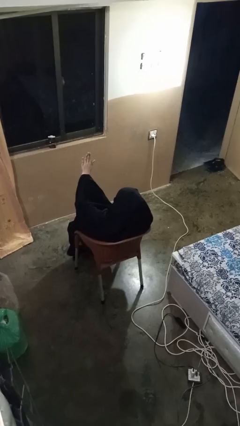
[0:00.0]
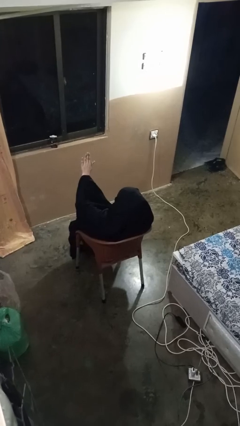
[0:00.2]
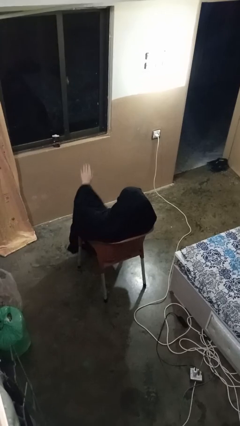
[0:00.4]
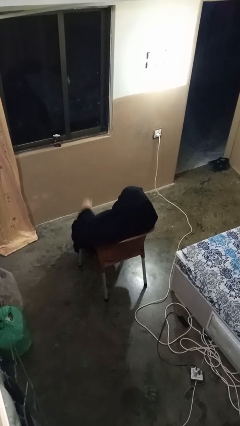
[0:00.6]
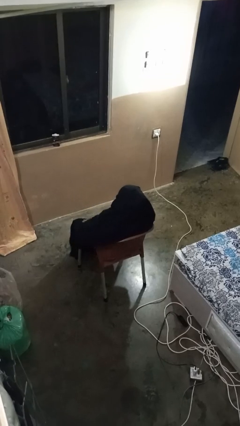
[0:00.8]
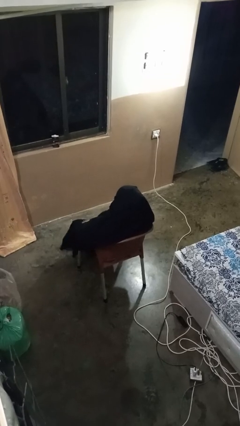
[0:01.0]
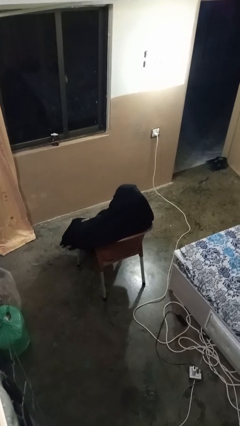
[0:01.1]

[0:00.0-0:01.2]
person gestures lower hand

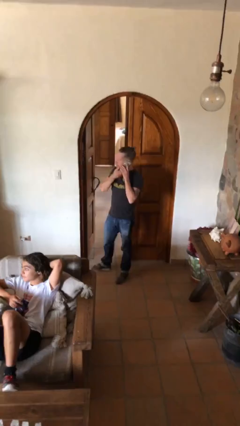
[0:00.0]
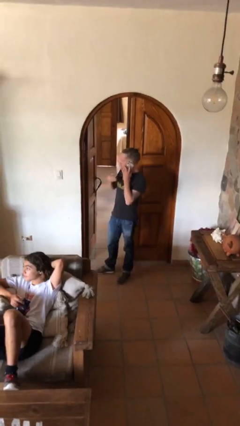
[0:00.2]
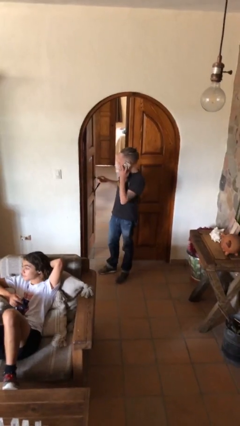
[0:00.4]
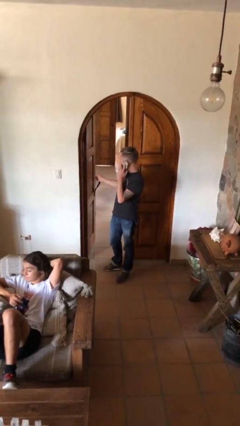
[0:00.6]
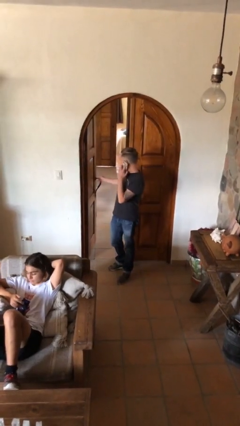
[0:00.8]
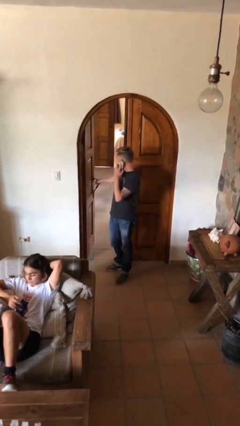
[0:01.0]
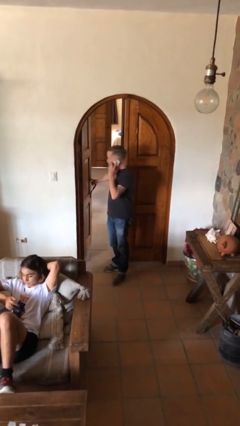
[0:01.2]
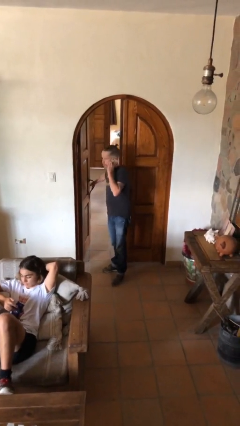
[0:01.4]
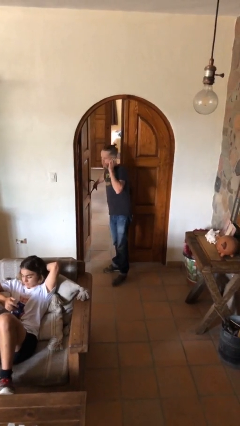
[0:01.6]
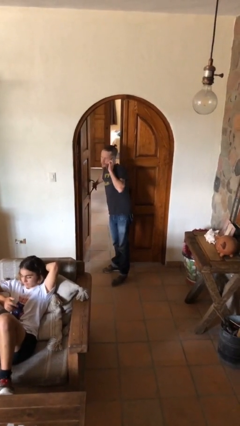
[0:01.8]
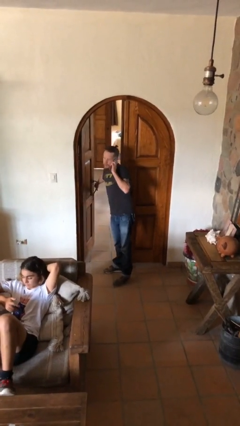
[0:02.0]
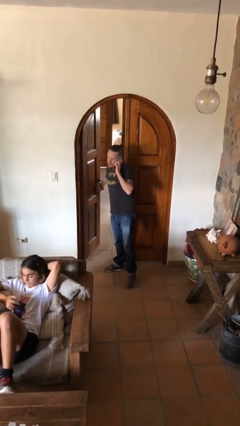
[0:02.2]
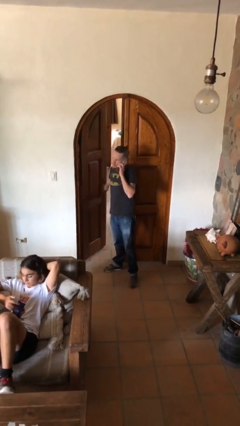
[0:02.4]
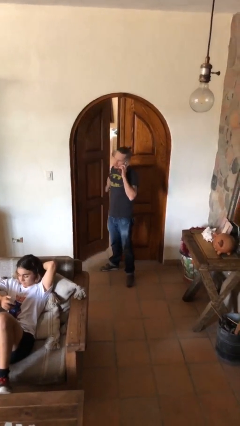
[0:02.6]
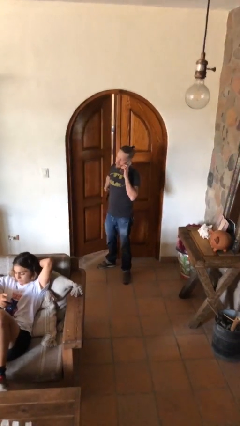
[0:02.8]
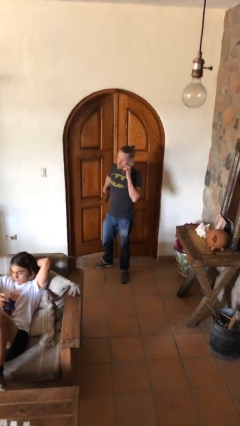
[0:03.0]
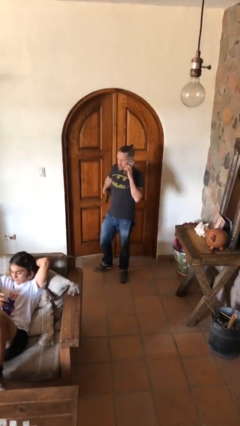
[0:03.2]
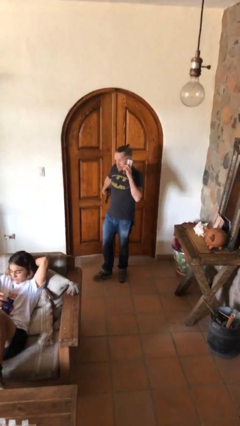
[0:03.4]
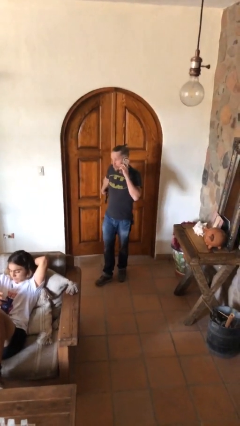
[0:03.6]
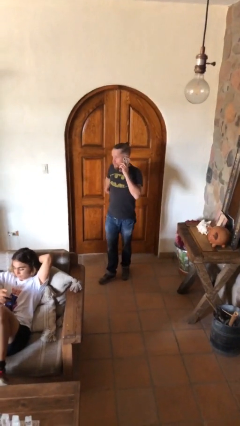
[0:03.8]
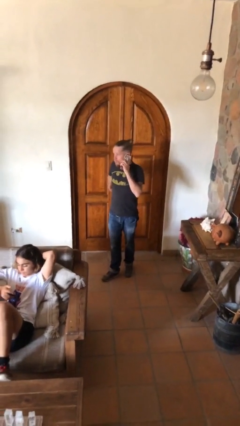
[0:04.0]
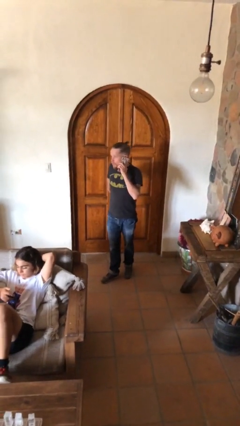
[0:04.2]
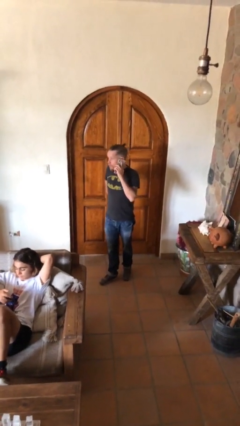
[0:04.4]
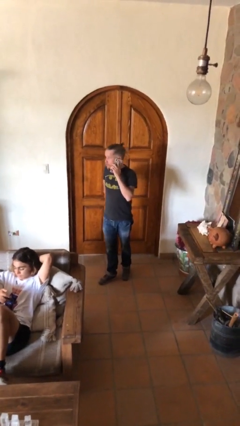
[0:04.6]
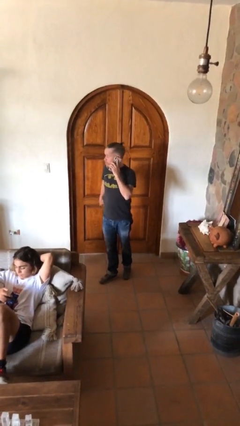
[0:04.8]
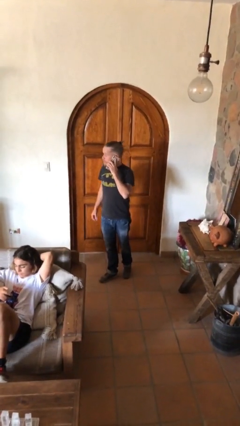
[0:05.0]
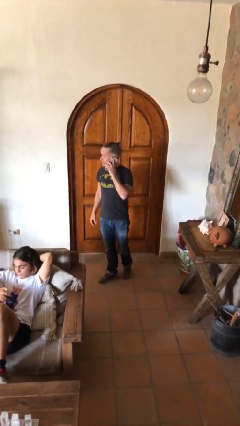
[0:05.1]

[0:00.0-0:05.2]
person closes facility door

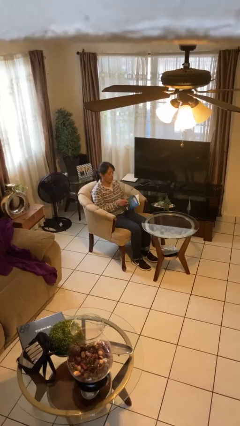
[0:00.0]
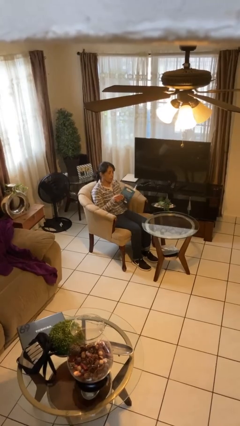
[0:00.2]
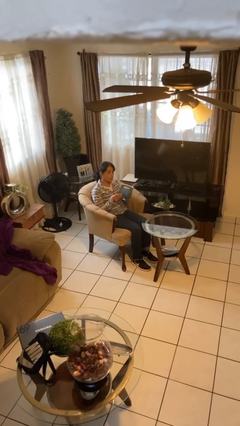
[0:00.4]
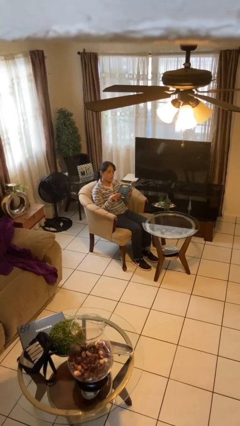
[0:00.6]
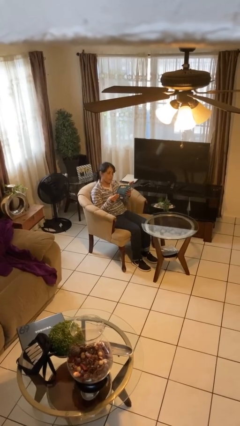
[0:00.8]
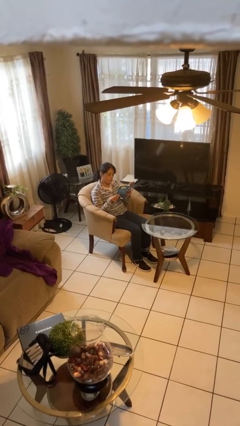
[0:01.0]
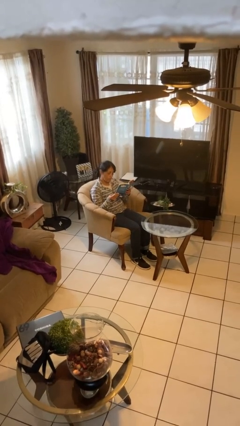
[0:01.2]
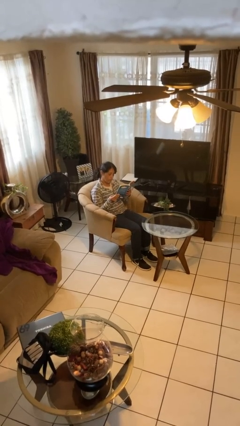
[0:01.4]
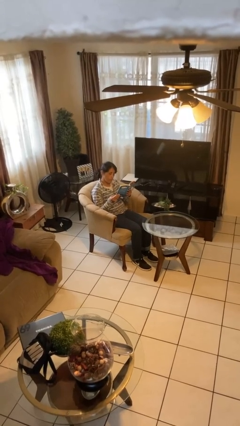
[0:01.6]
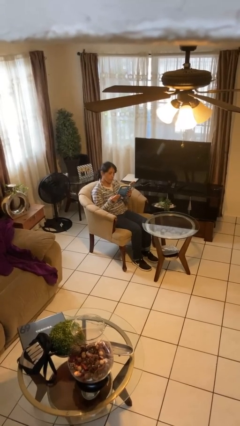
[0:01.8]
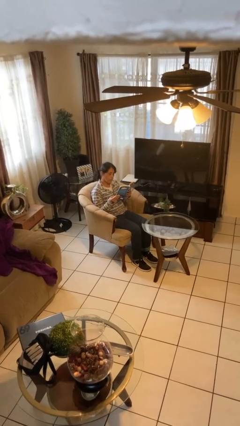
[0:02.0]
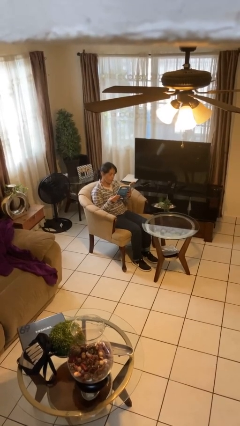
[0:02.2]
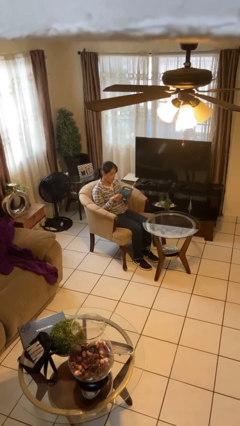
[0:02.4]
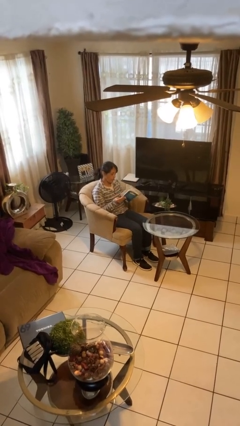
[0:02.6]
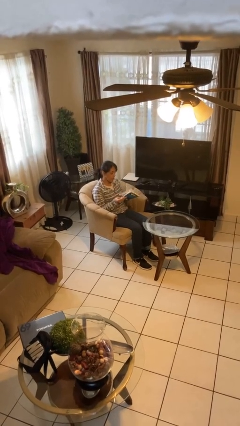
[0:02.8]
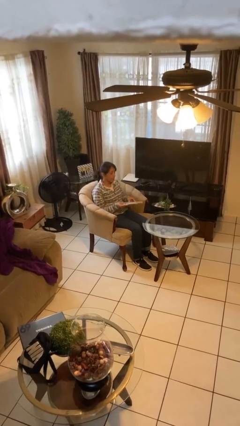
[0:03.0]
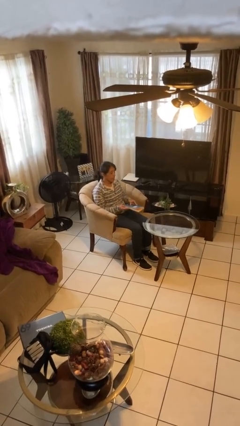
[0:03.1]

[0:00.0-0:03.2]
person reads document

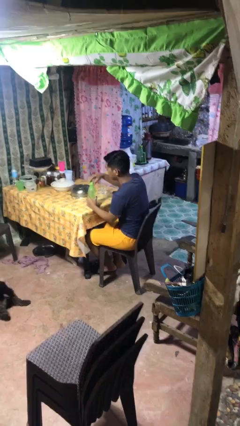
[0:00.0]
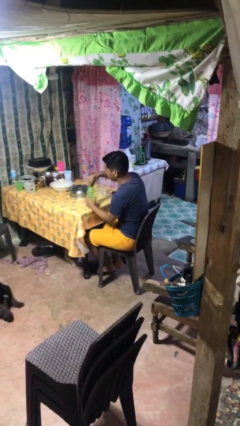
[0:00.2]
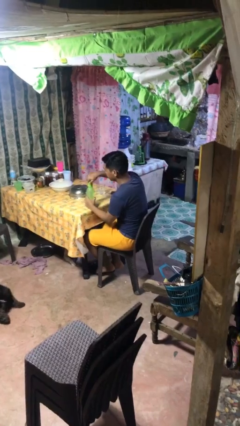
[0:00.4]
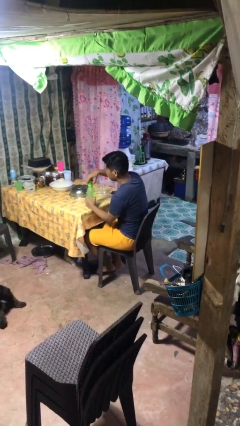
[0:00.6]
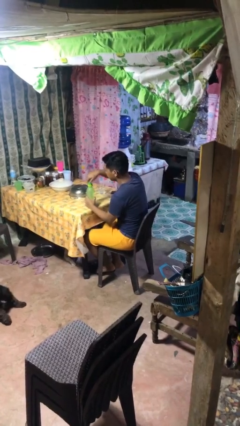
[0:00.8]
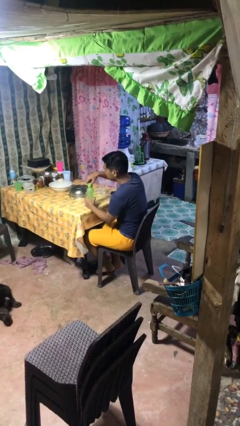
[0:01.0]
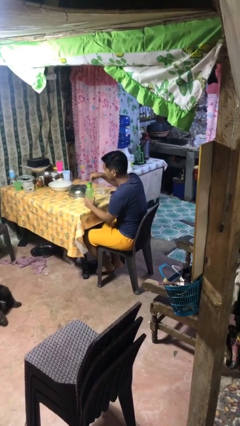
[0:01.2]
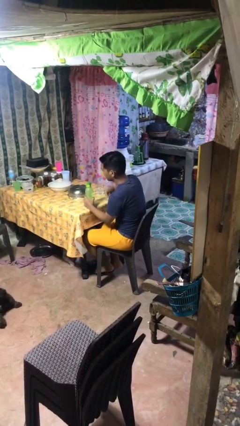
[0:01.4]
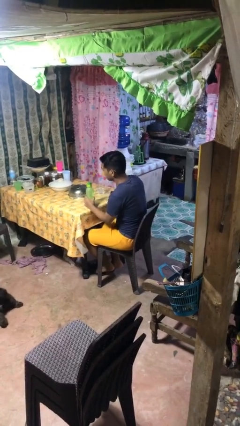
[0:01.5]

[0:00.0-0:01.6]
person screws lid to bottle

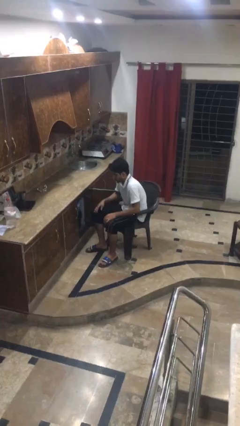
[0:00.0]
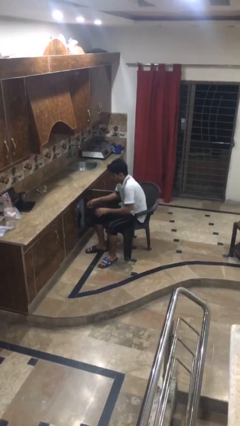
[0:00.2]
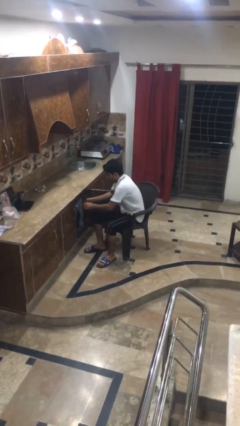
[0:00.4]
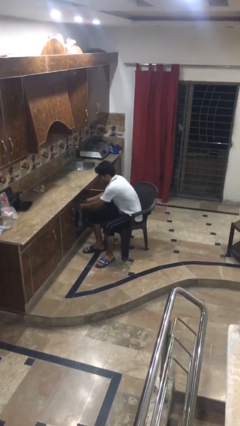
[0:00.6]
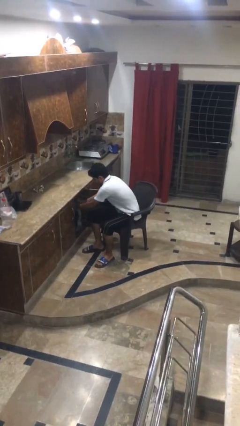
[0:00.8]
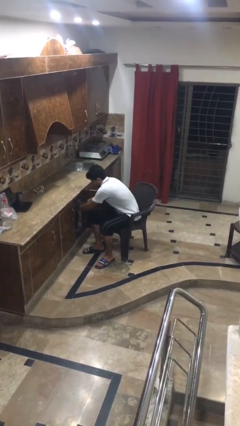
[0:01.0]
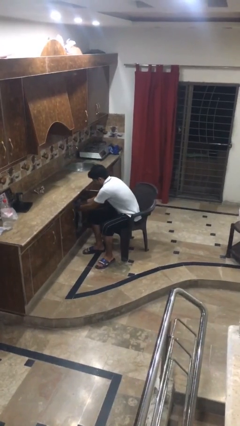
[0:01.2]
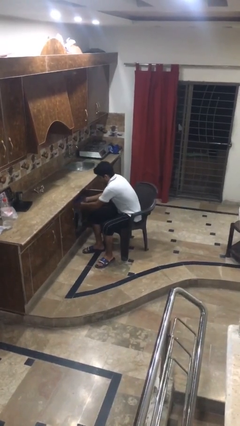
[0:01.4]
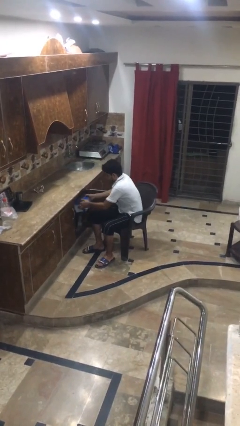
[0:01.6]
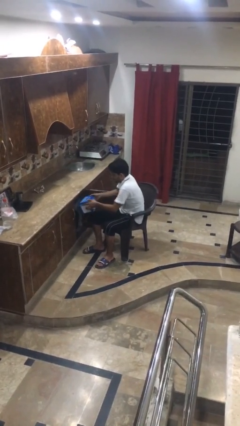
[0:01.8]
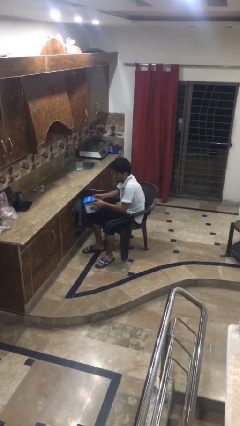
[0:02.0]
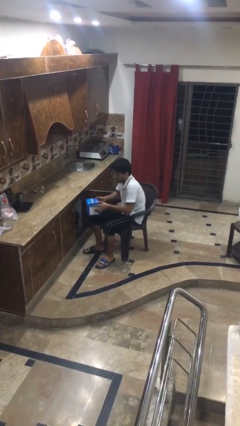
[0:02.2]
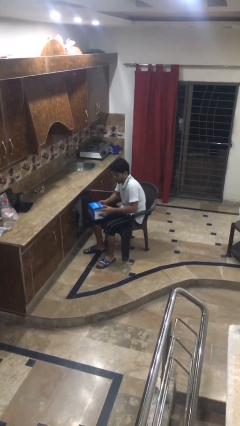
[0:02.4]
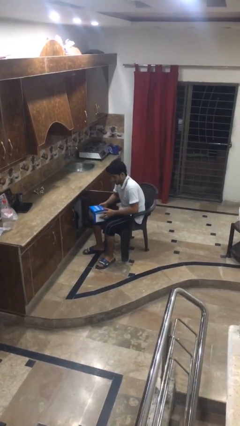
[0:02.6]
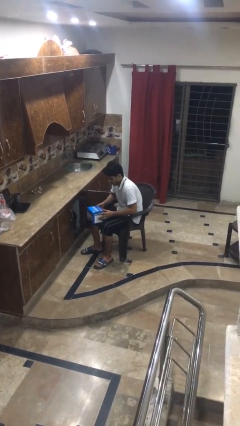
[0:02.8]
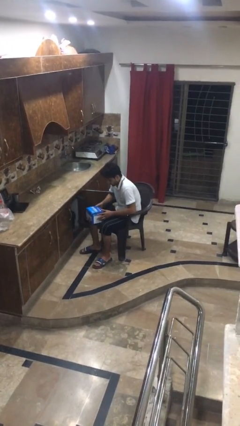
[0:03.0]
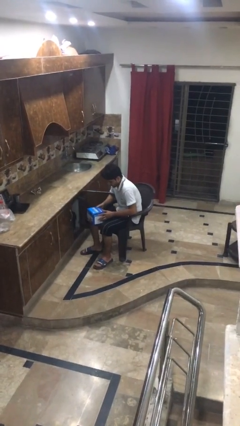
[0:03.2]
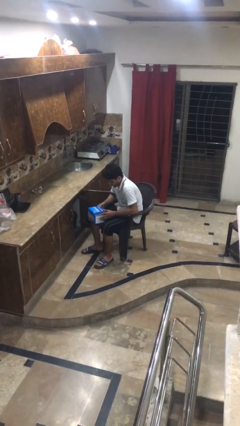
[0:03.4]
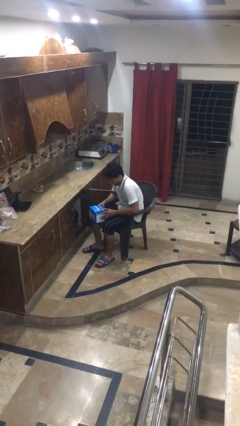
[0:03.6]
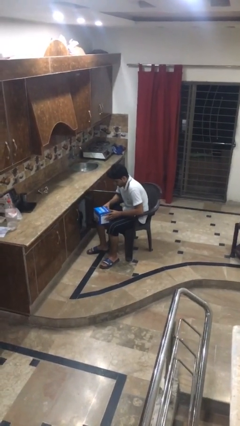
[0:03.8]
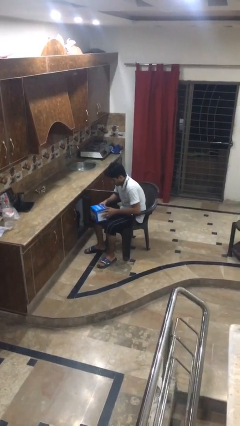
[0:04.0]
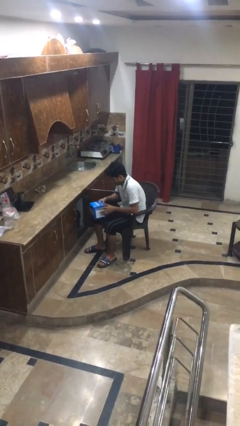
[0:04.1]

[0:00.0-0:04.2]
person picks up object from cabinet

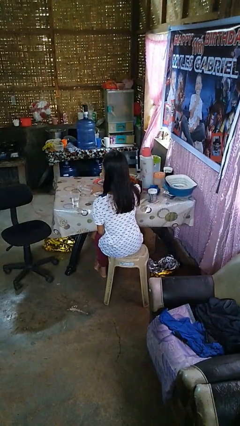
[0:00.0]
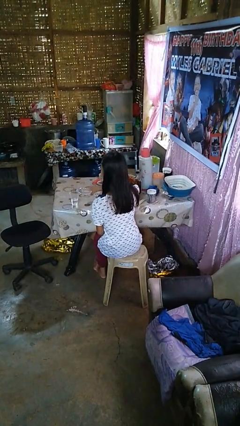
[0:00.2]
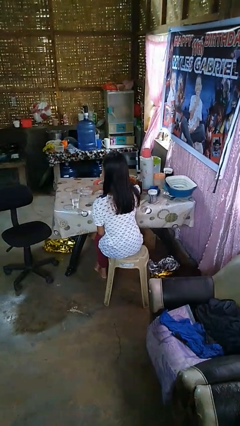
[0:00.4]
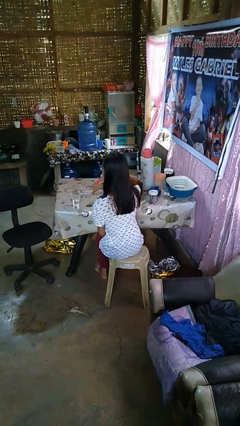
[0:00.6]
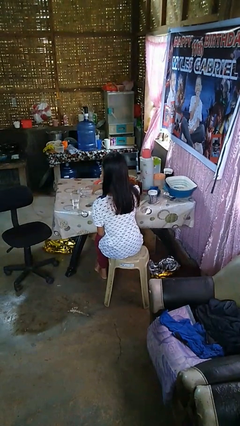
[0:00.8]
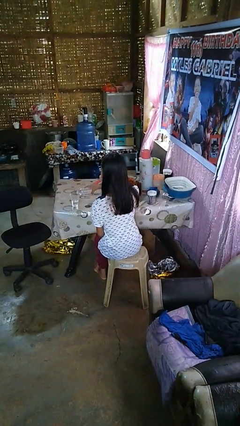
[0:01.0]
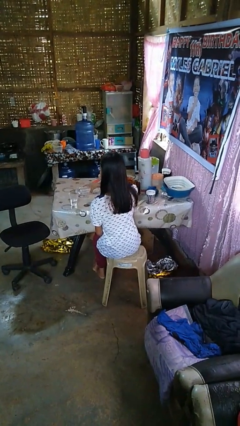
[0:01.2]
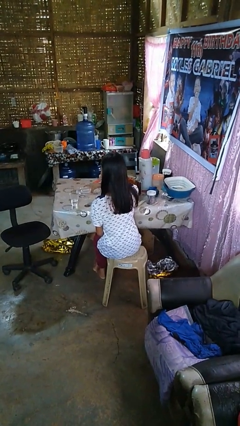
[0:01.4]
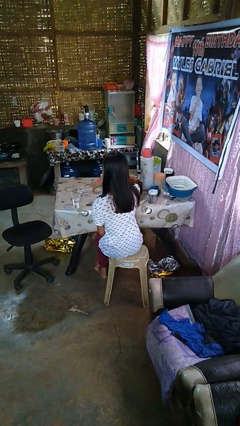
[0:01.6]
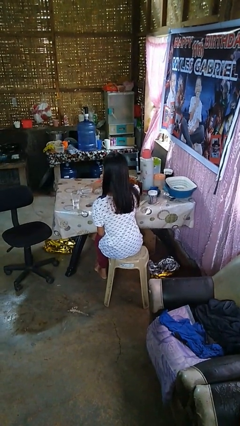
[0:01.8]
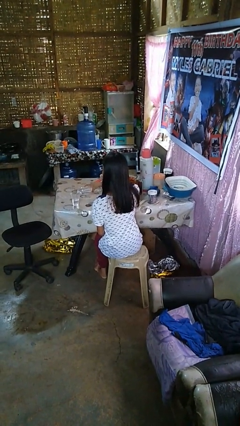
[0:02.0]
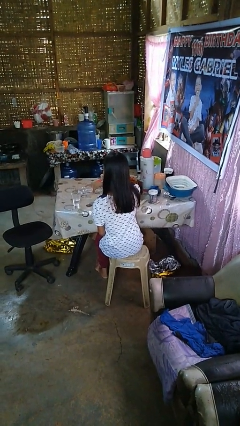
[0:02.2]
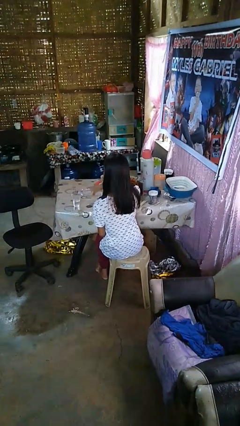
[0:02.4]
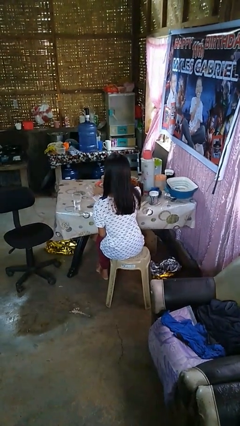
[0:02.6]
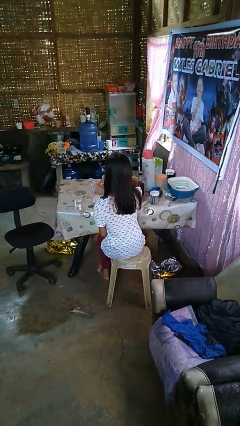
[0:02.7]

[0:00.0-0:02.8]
person pours liquid into cup
